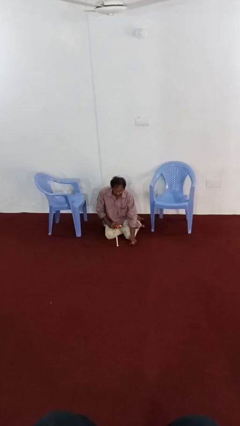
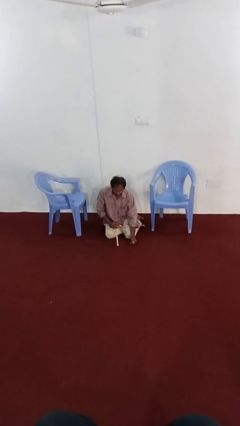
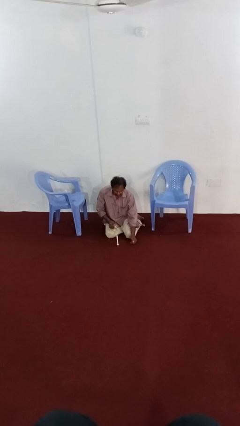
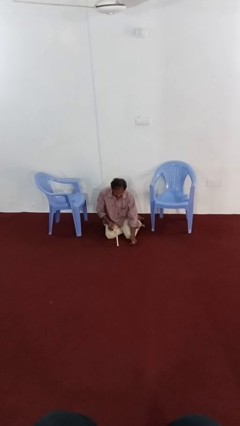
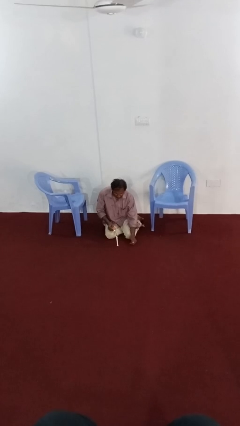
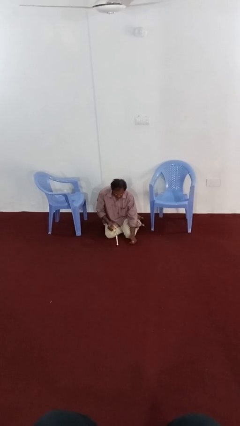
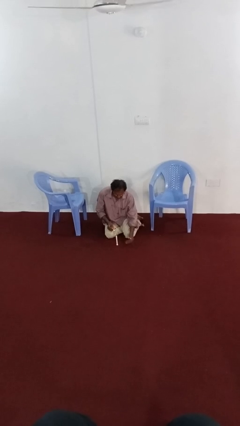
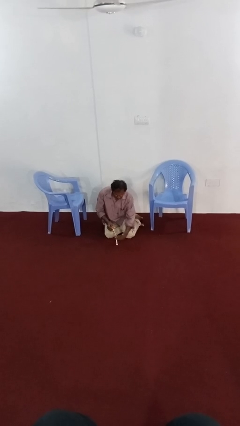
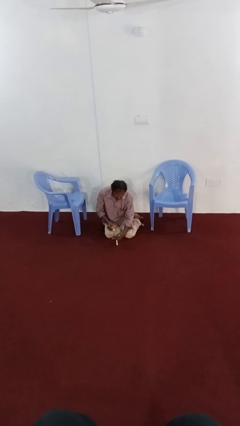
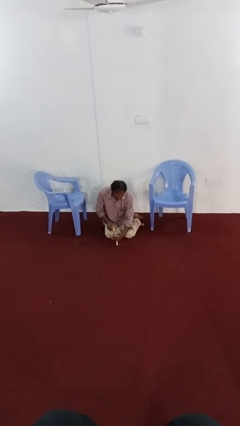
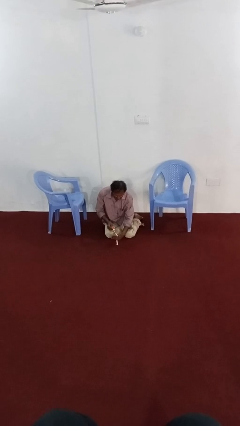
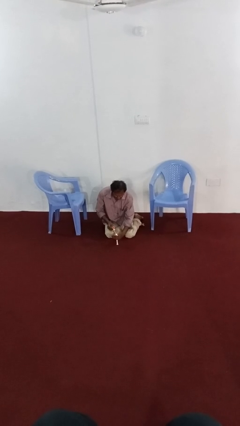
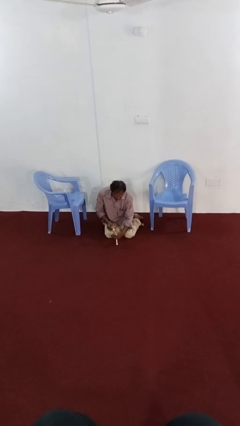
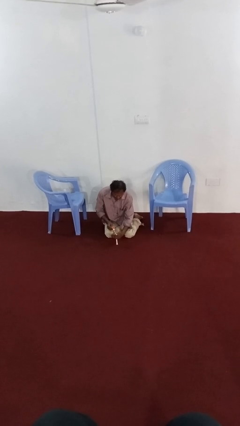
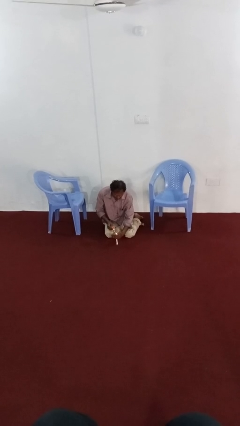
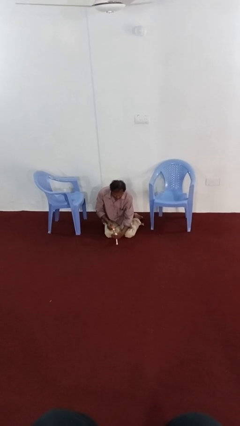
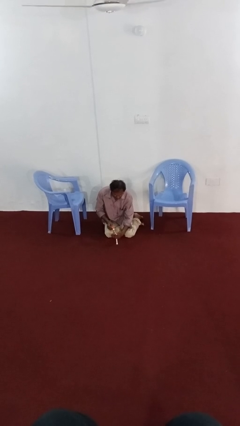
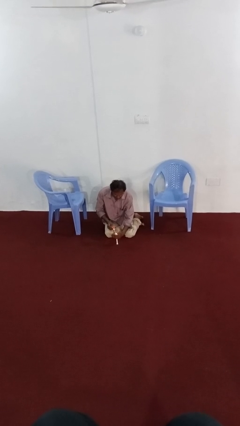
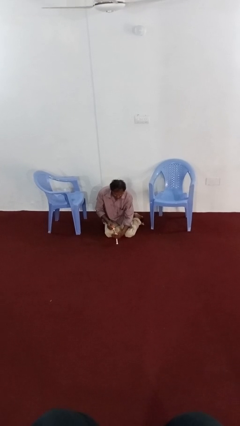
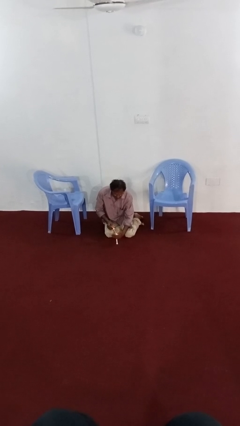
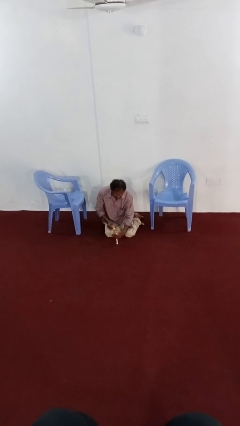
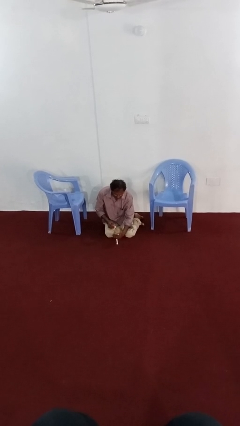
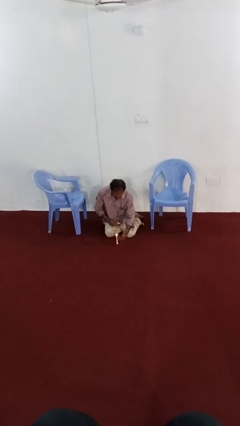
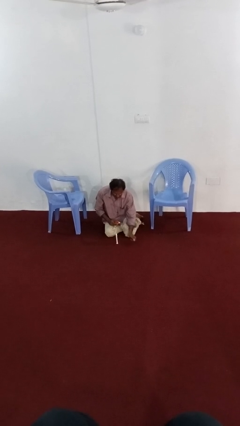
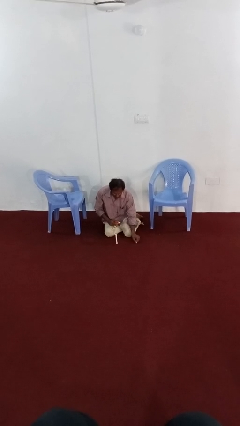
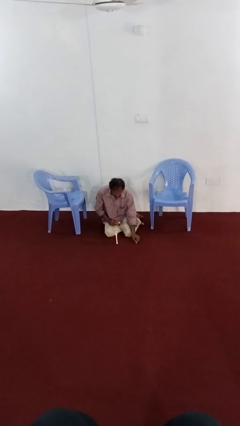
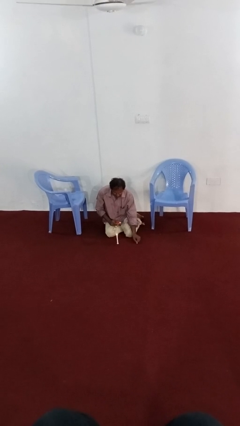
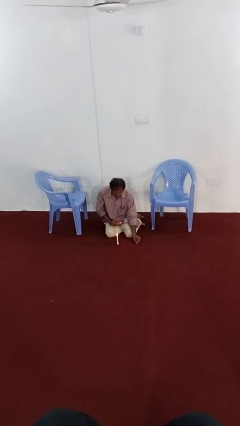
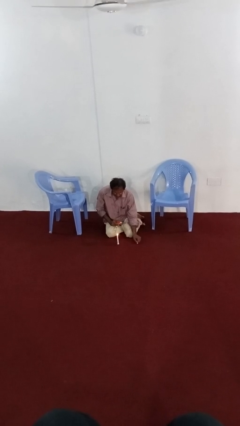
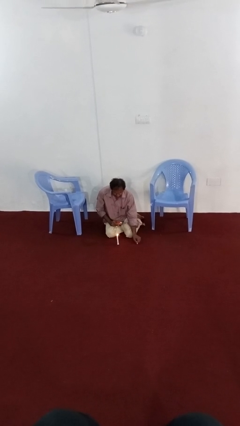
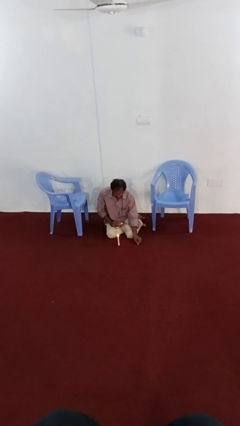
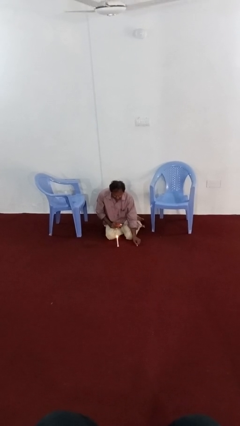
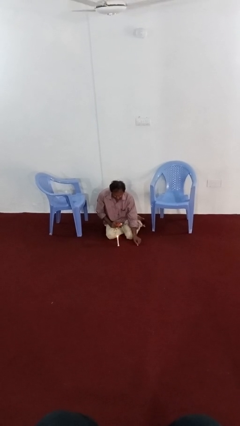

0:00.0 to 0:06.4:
person lights candle

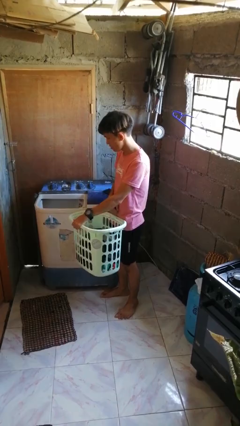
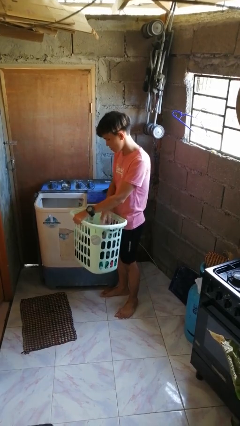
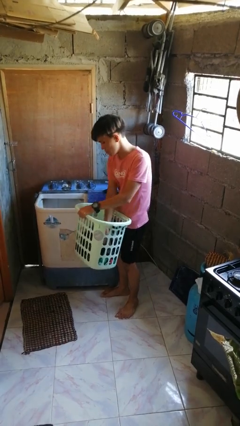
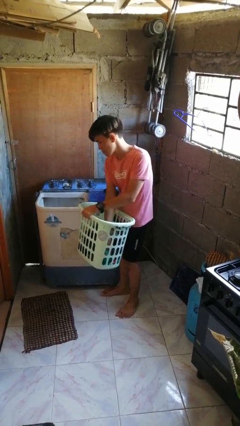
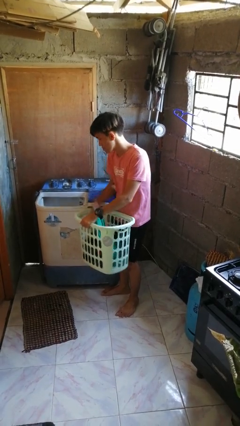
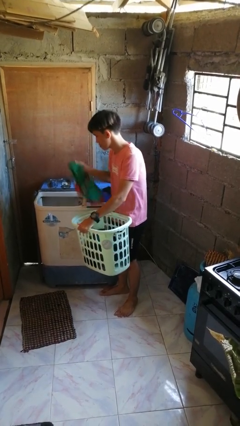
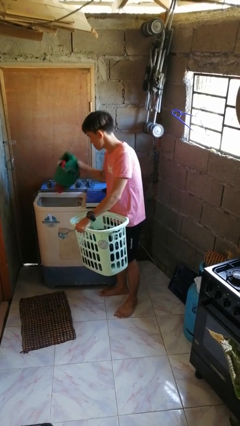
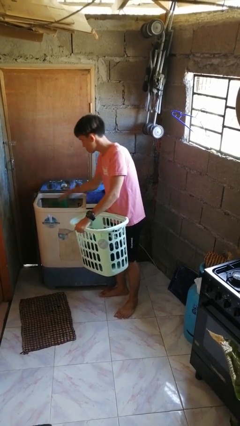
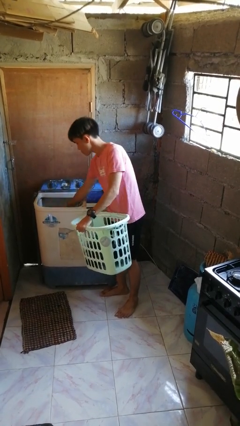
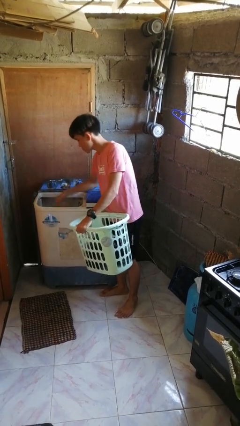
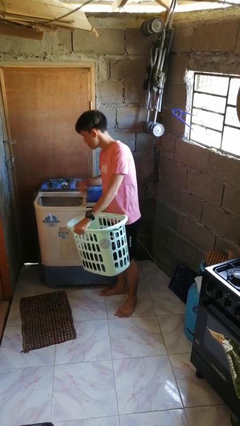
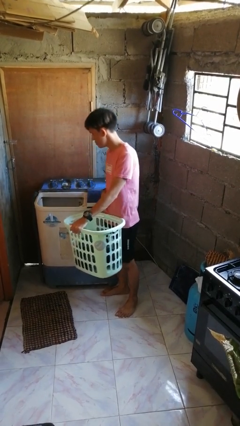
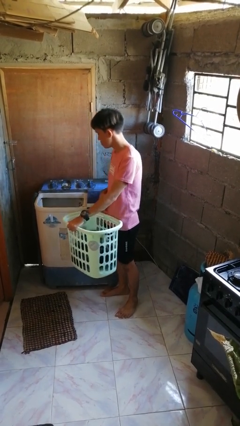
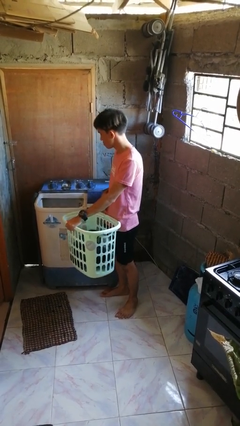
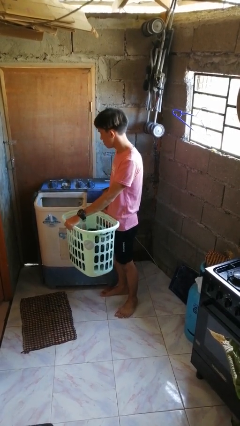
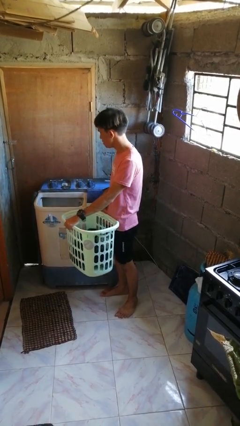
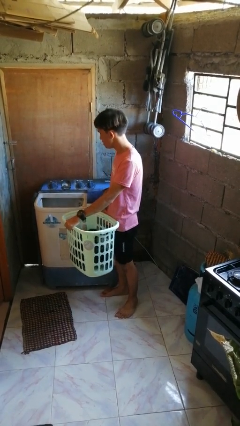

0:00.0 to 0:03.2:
person loads clotheswasher

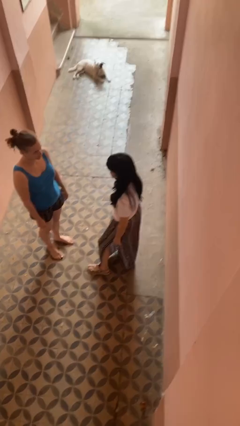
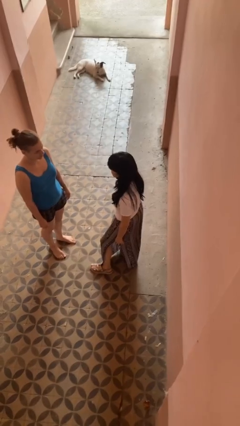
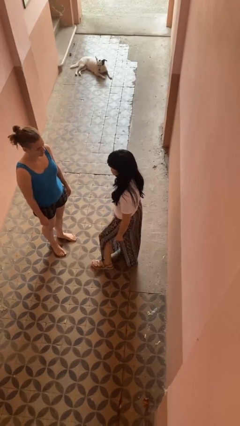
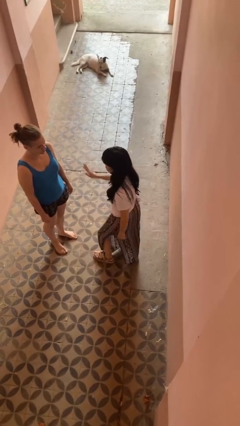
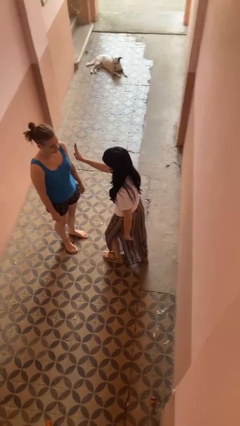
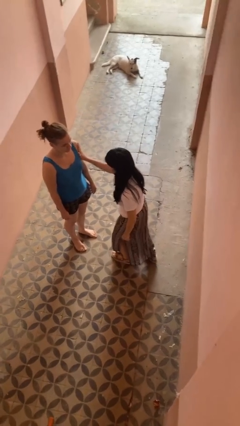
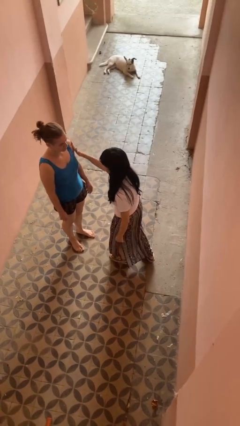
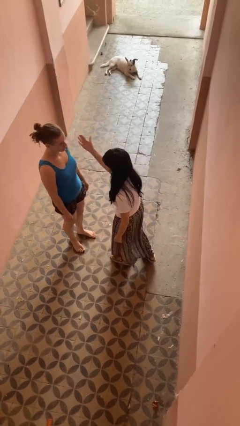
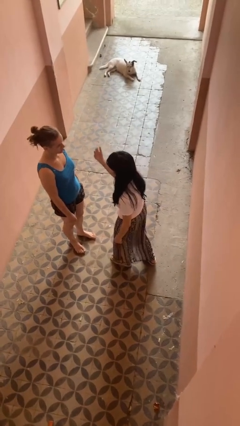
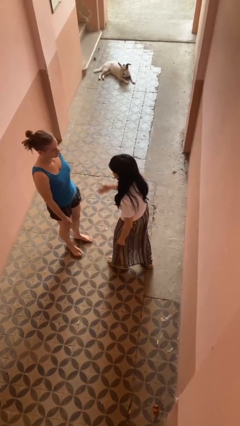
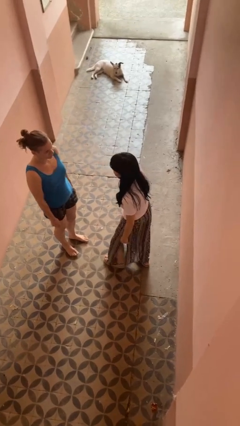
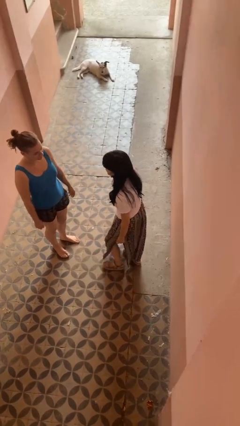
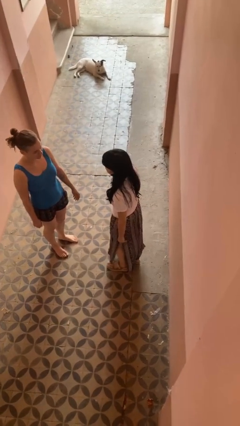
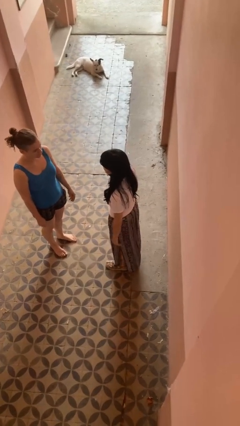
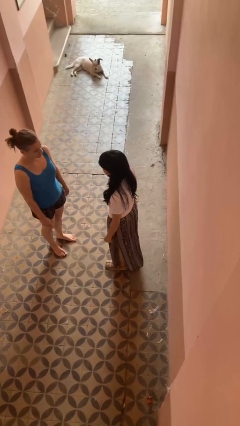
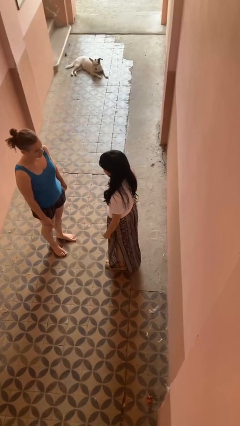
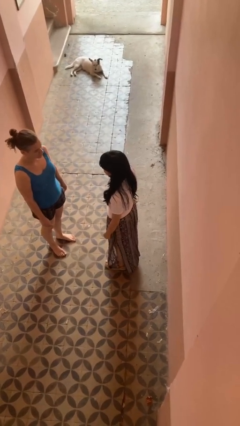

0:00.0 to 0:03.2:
person shoves person

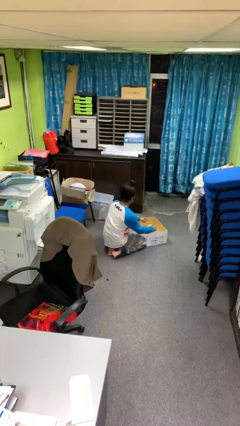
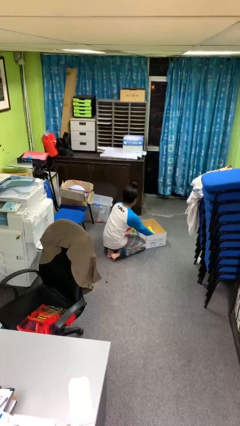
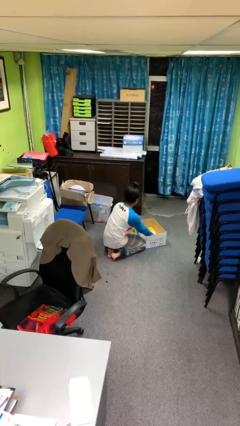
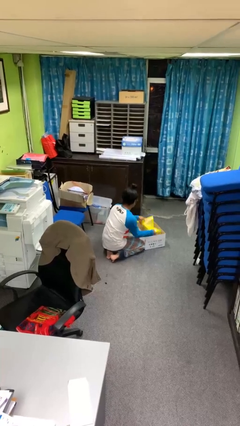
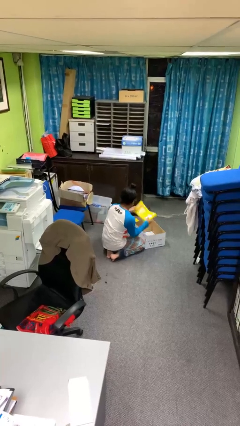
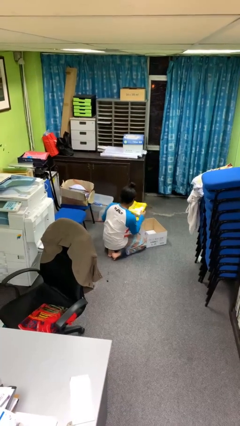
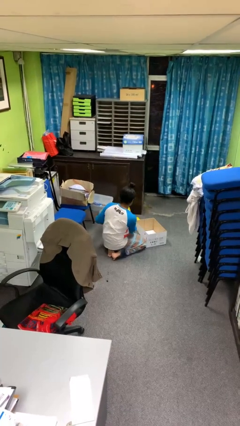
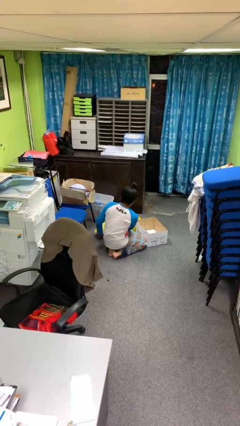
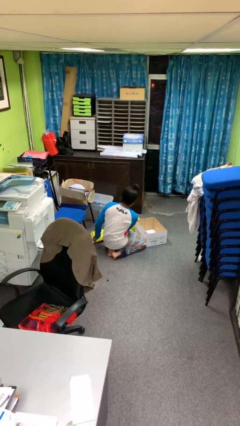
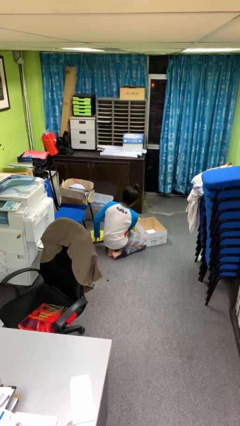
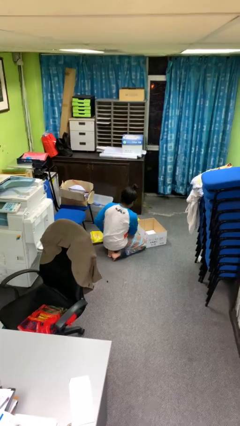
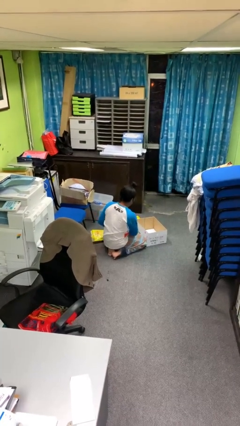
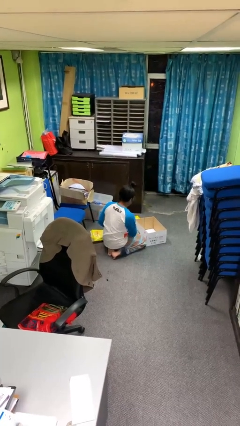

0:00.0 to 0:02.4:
person takes object from box

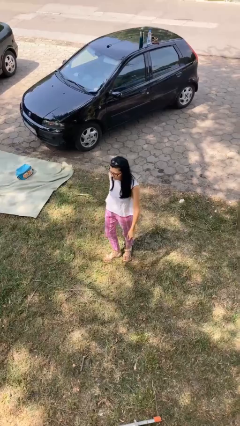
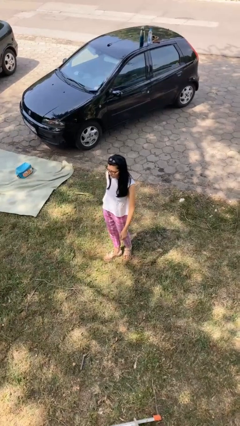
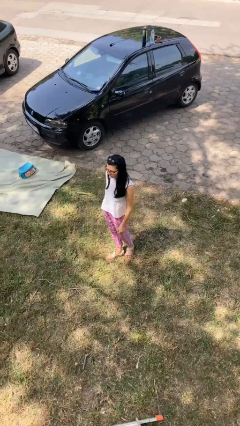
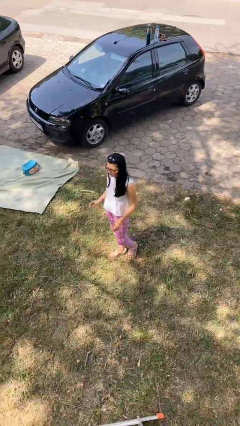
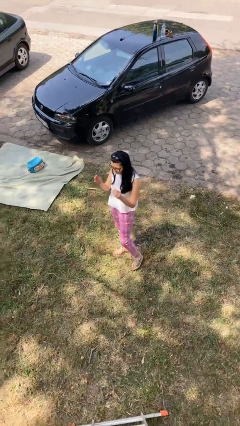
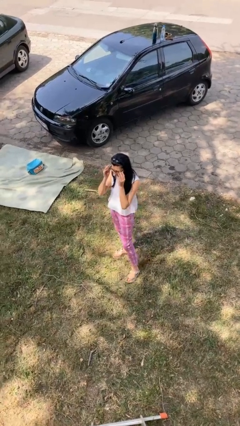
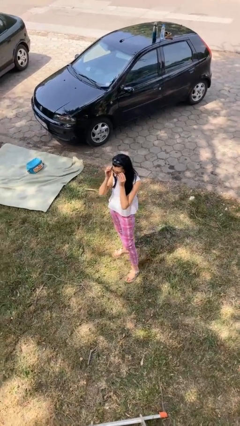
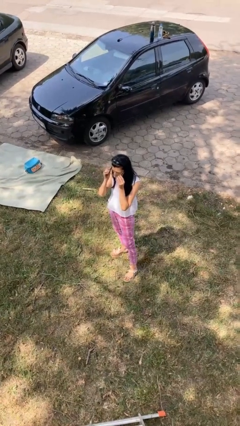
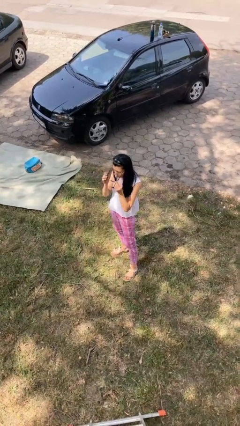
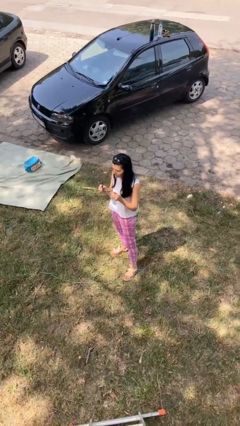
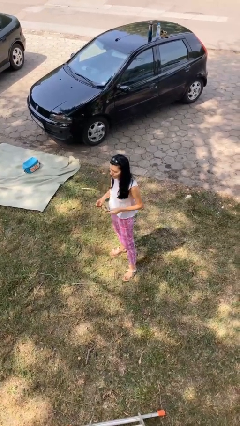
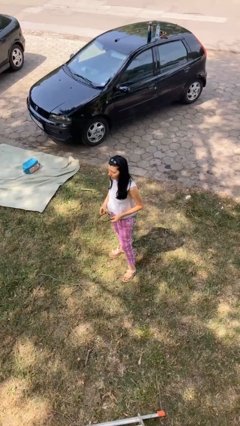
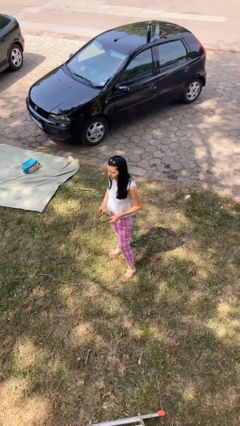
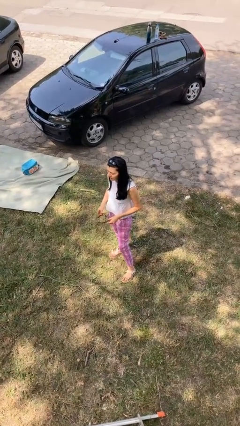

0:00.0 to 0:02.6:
person takes off glasses
